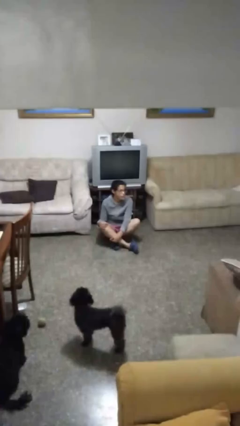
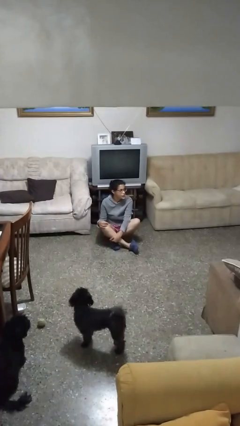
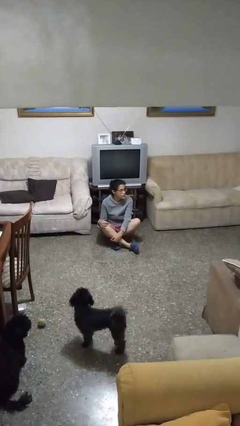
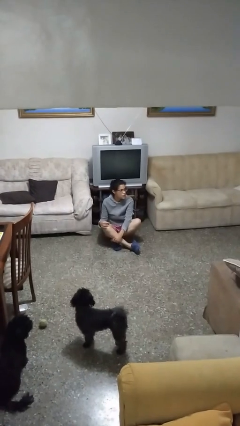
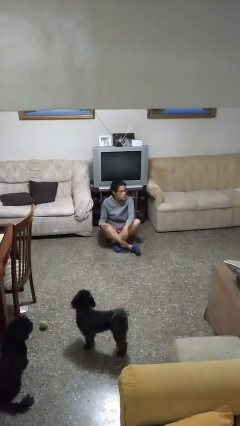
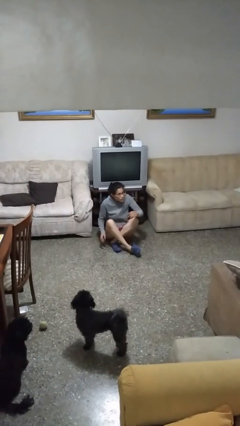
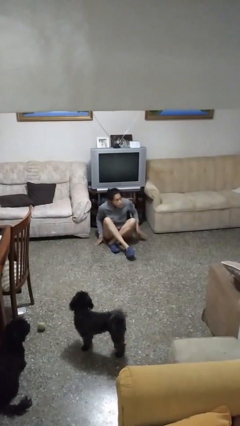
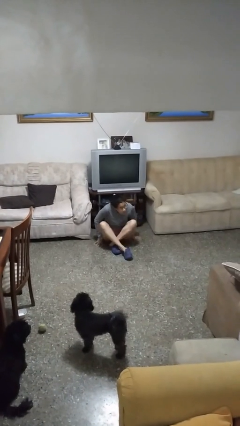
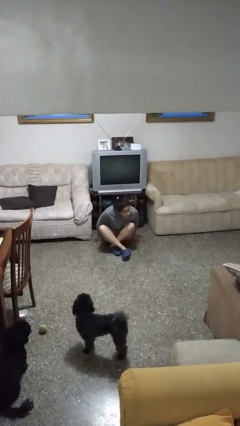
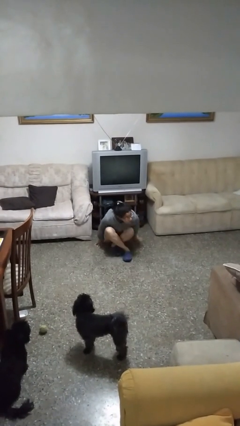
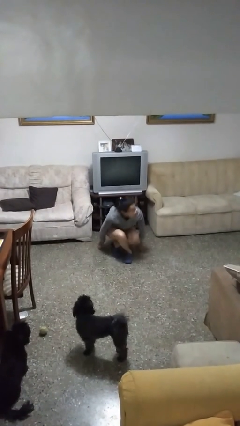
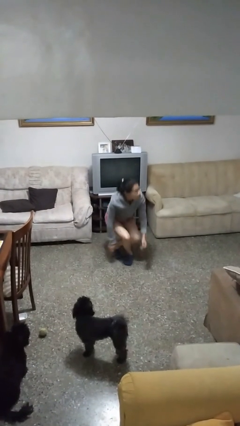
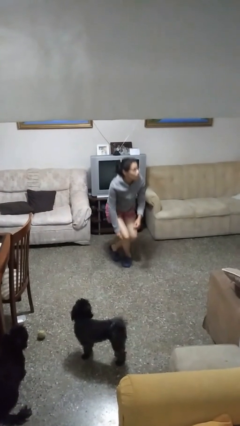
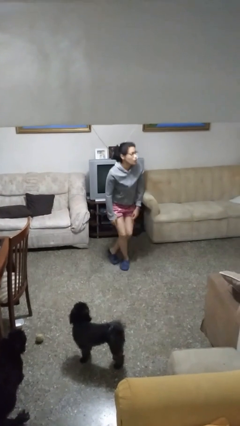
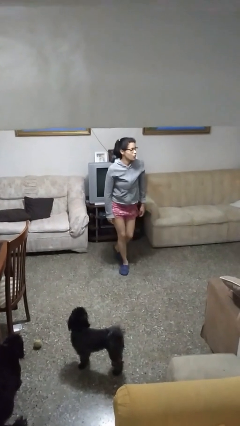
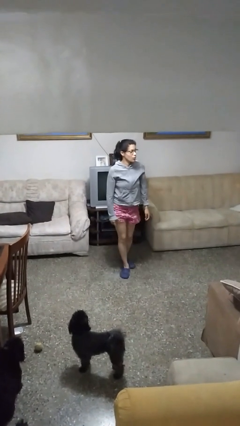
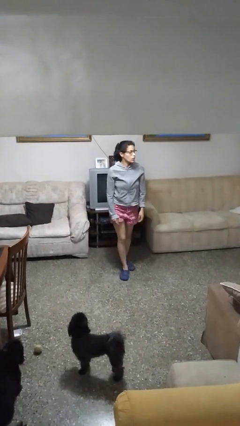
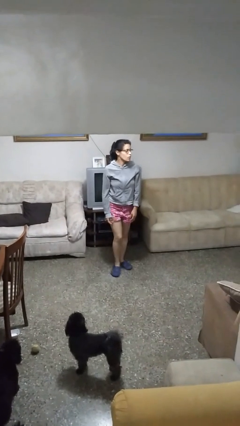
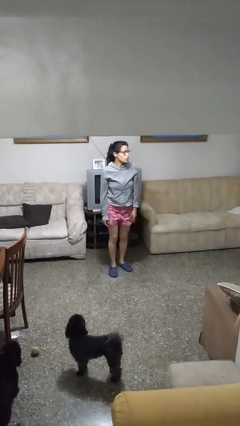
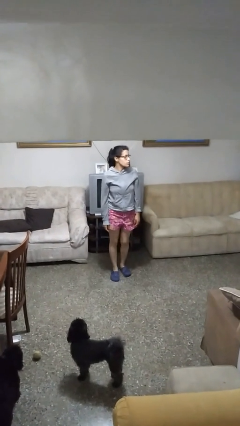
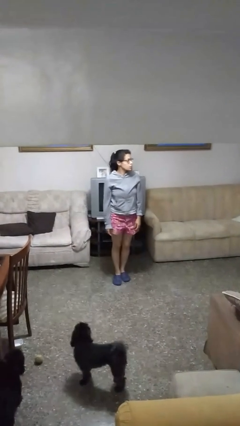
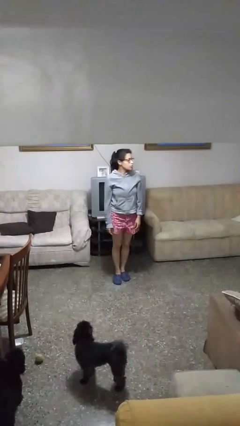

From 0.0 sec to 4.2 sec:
person stands up from floor

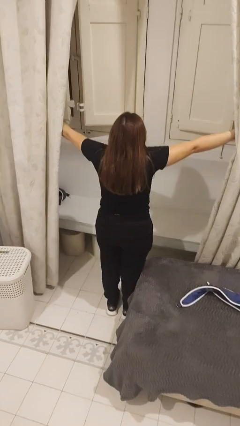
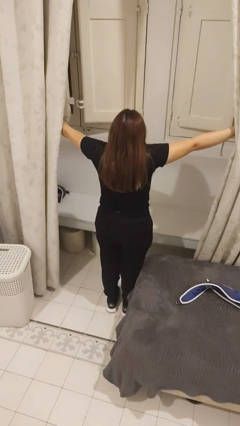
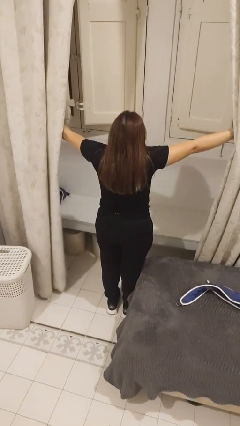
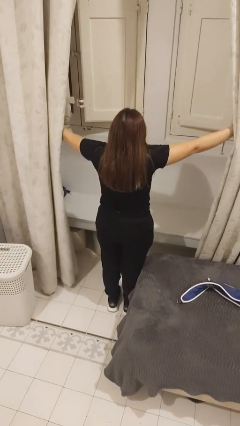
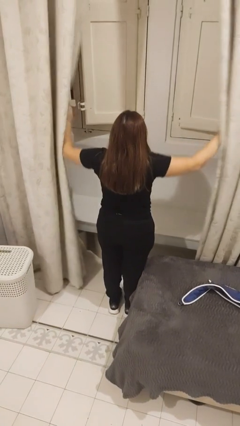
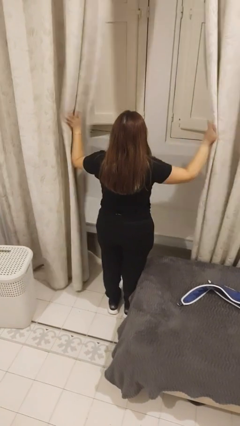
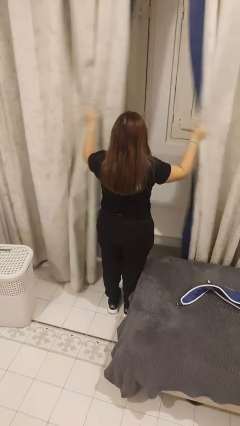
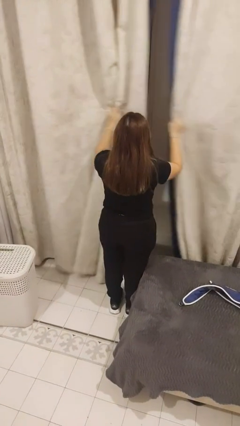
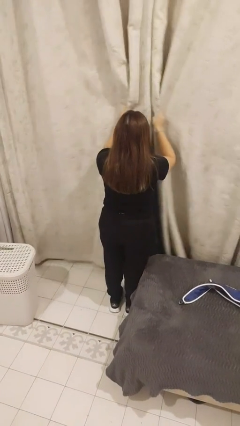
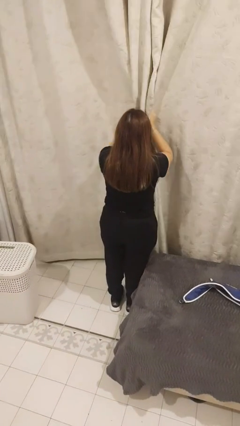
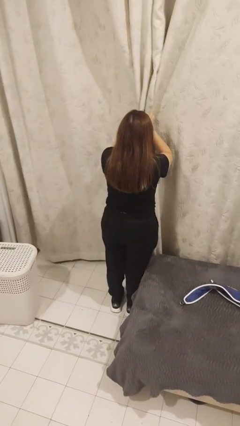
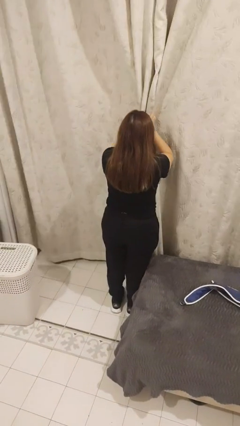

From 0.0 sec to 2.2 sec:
person closes curtains

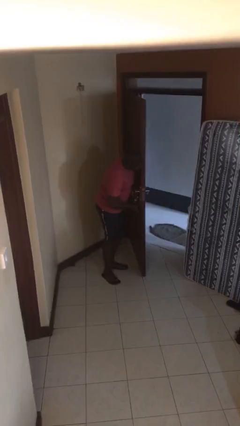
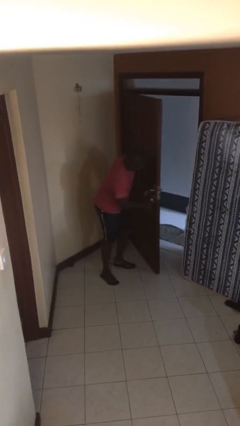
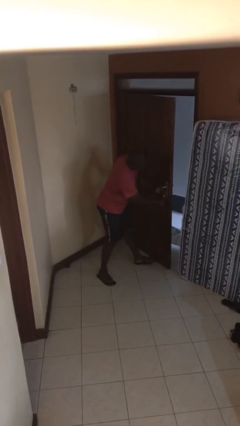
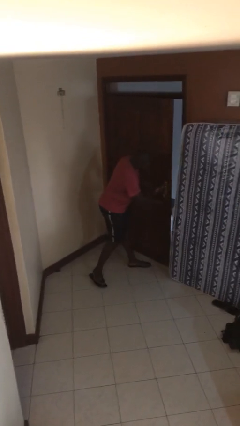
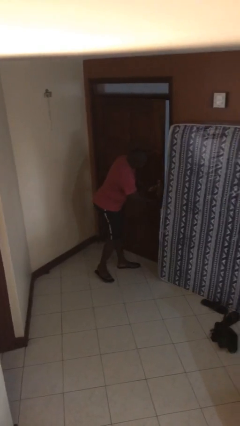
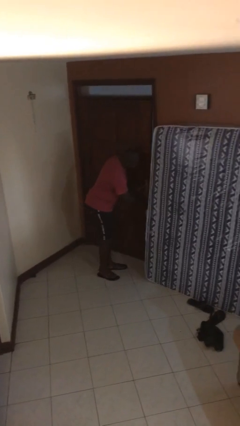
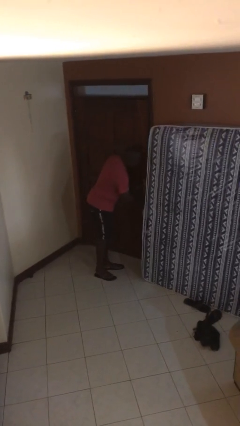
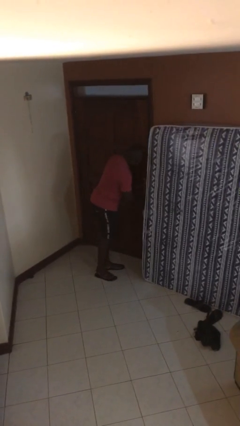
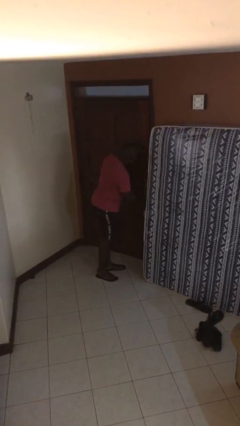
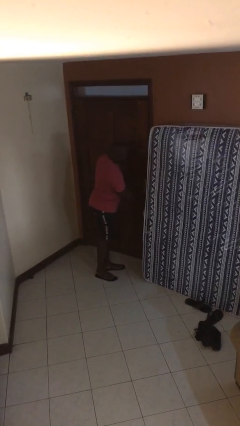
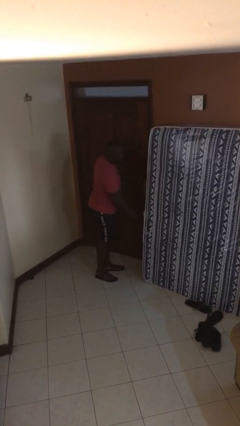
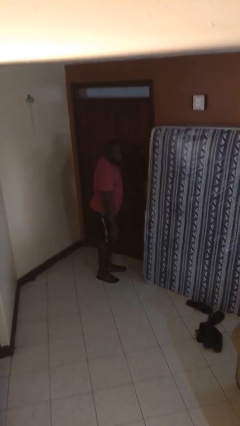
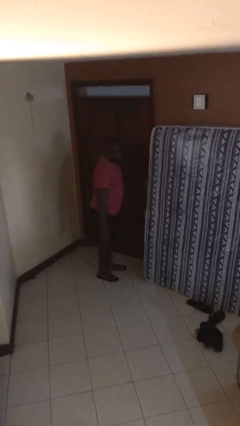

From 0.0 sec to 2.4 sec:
person closes facility door

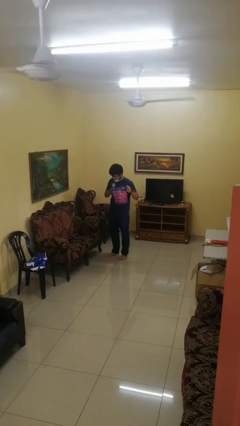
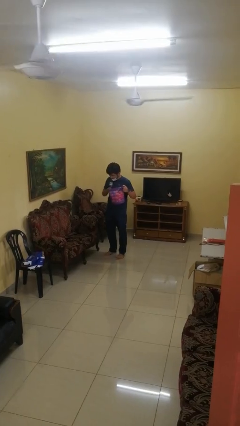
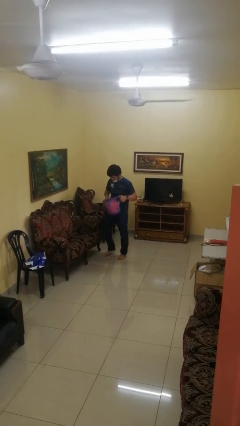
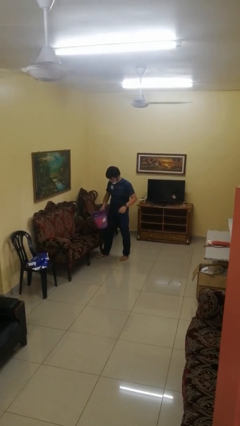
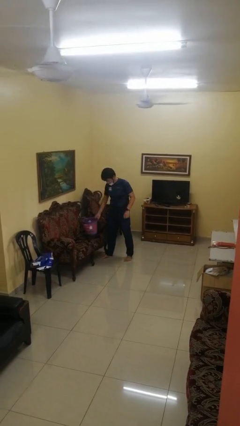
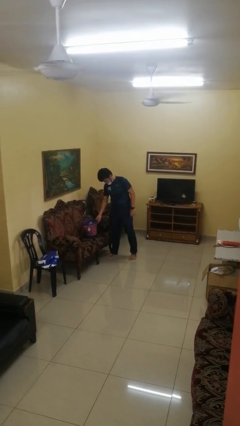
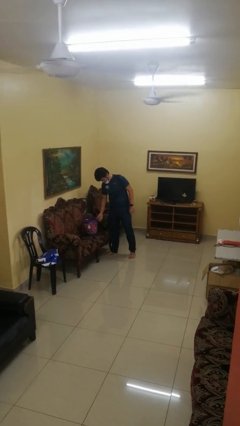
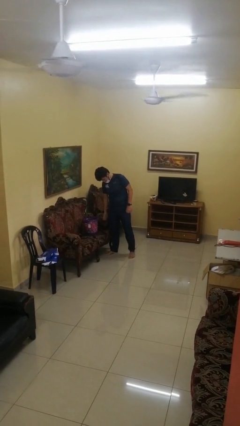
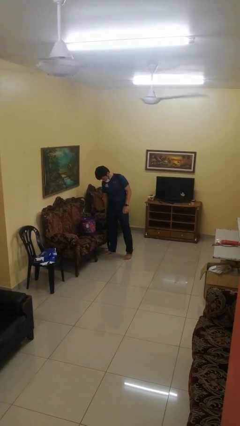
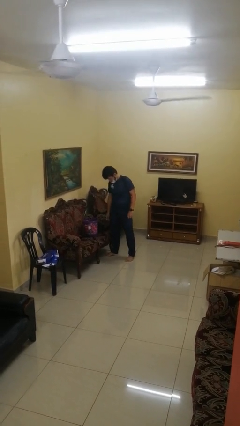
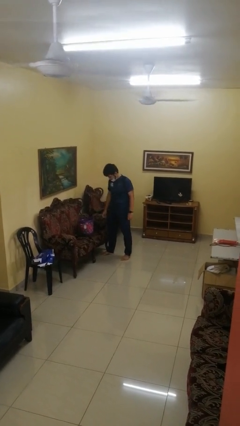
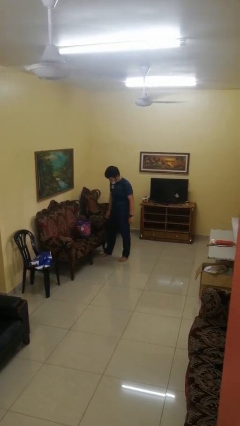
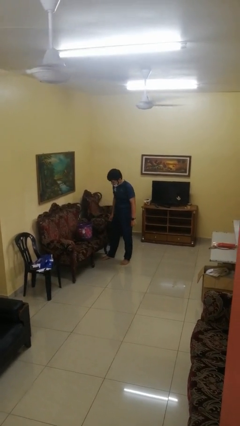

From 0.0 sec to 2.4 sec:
person puts down object on couch

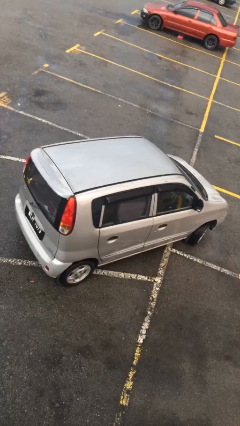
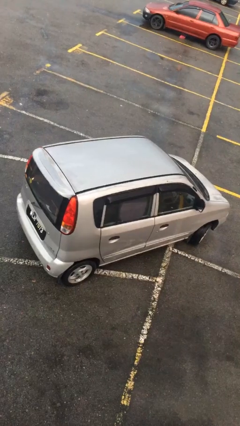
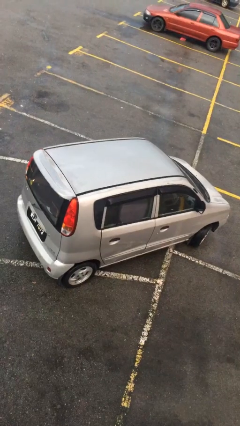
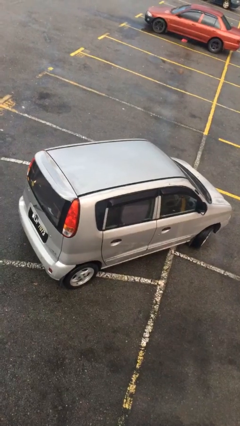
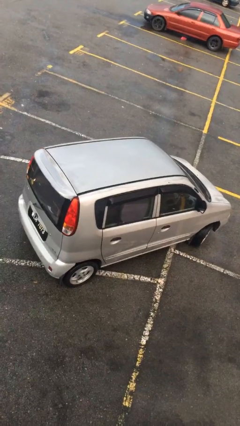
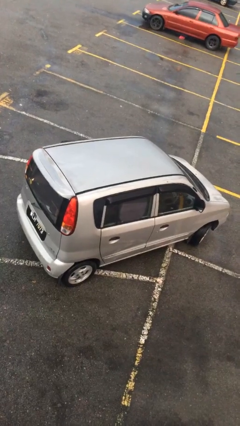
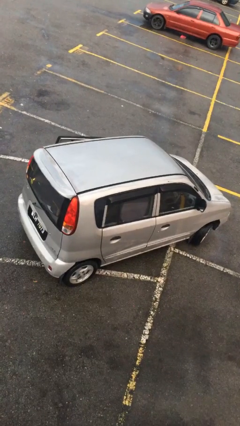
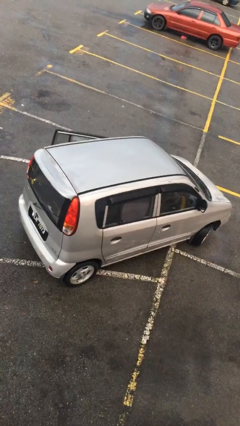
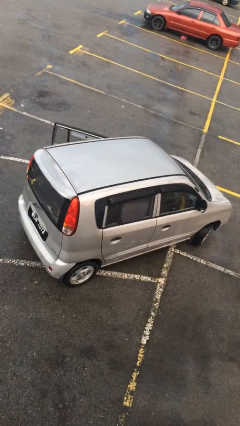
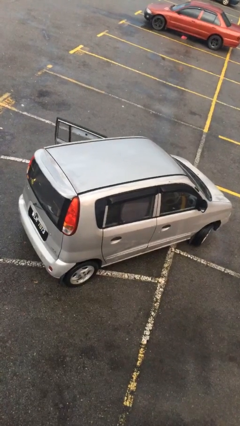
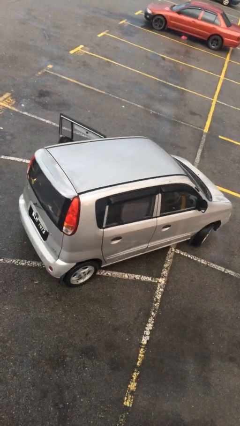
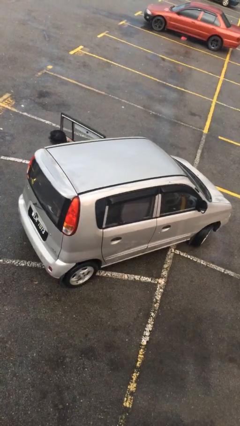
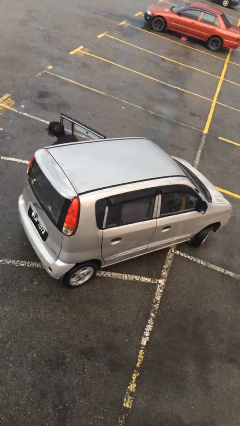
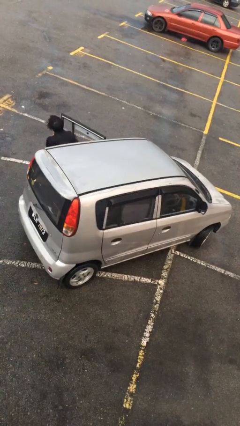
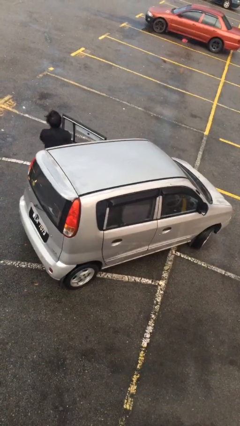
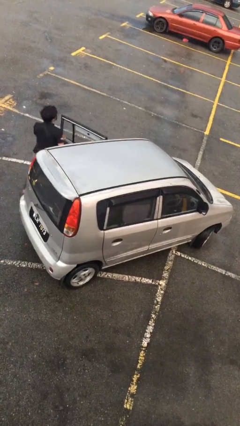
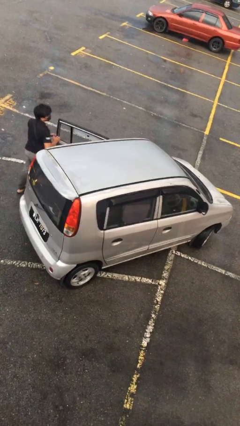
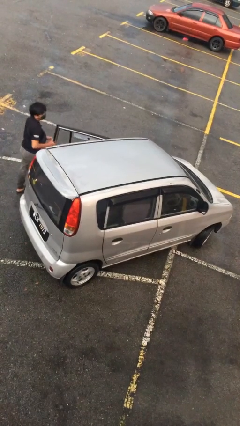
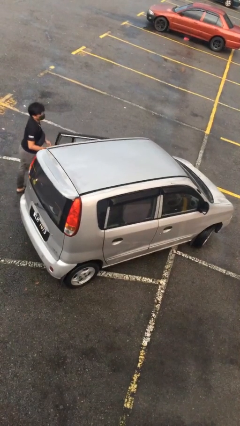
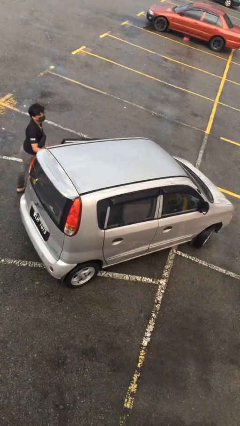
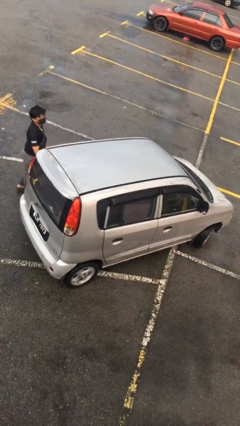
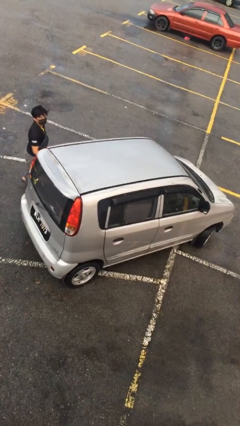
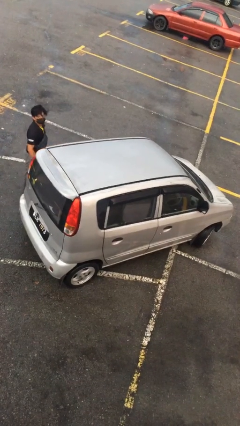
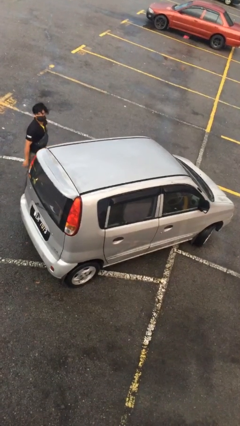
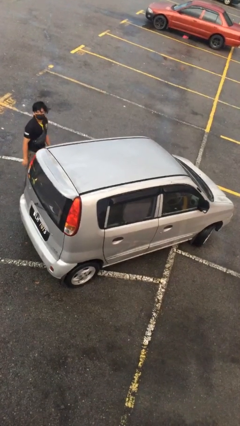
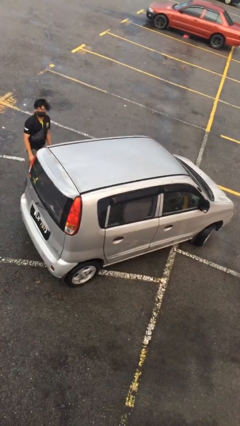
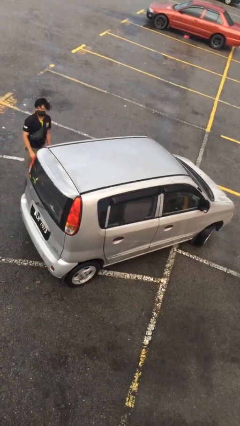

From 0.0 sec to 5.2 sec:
car drops off person

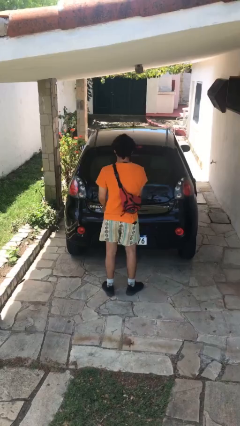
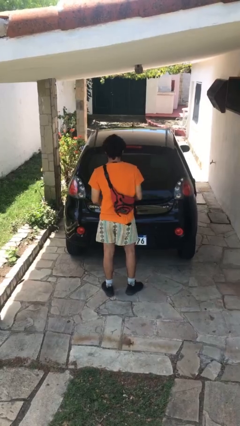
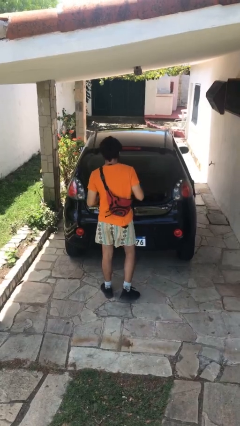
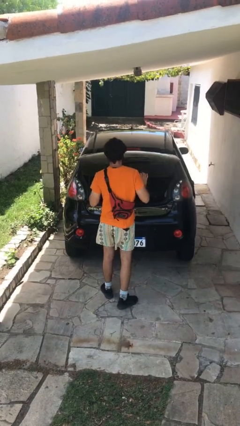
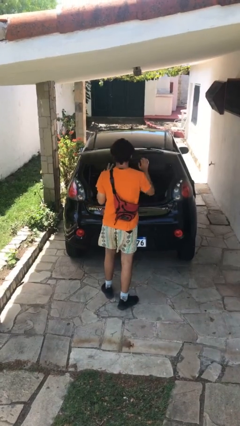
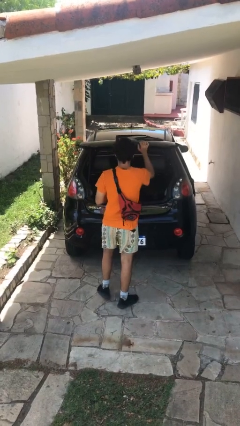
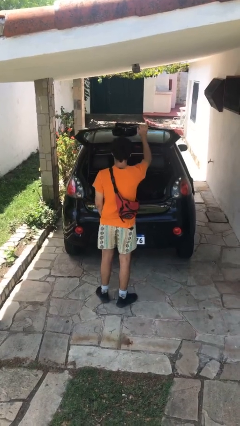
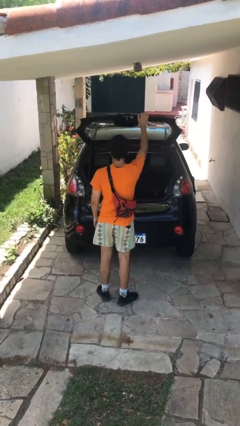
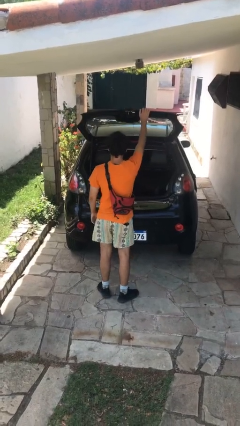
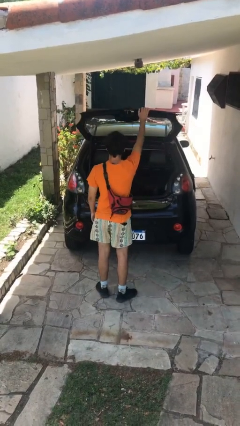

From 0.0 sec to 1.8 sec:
person opens car trunk
